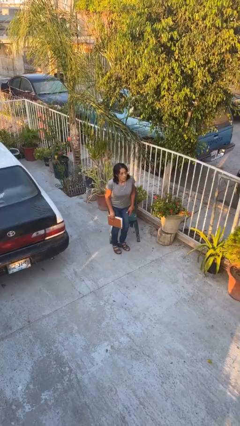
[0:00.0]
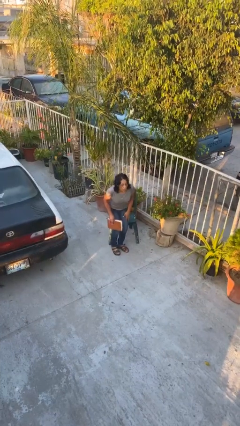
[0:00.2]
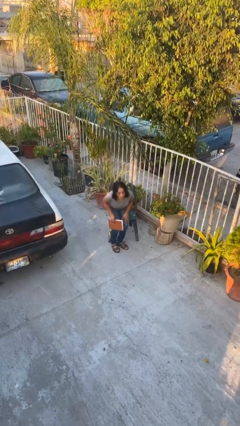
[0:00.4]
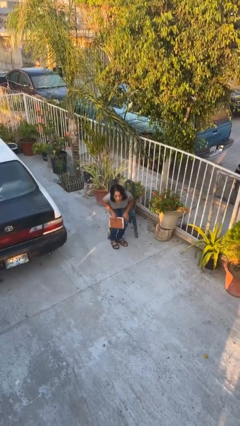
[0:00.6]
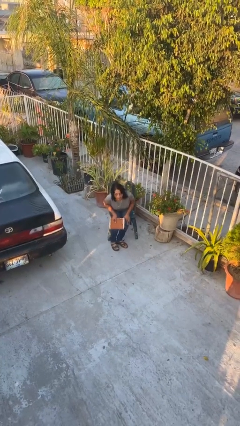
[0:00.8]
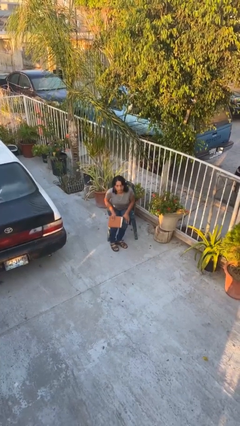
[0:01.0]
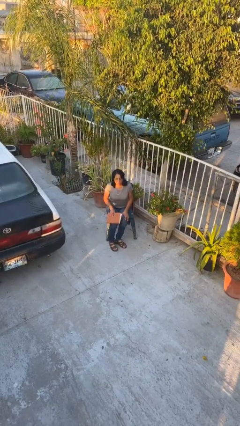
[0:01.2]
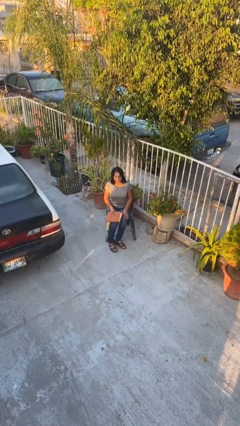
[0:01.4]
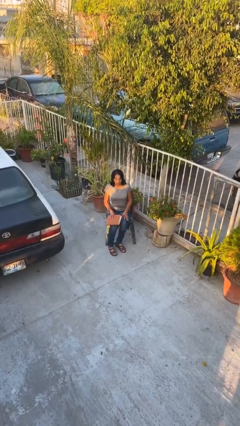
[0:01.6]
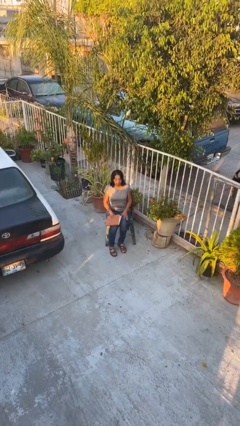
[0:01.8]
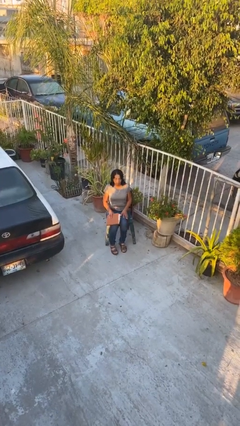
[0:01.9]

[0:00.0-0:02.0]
person sits down

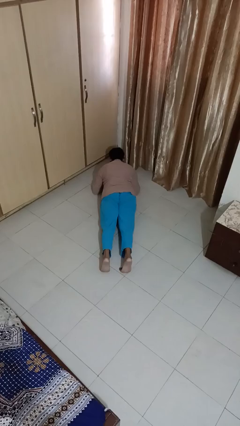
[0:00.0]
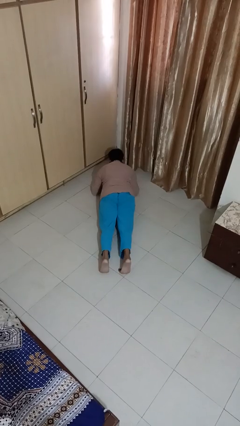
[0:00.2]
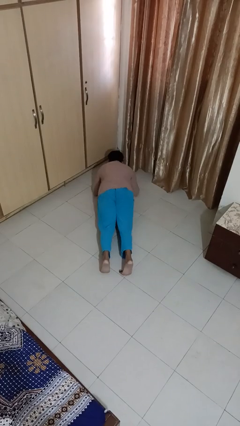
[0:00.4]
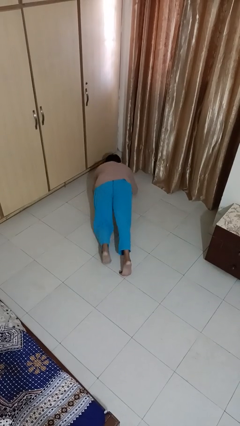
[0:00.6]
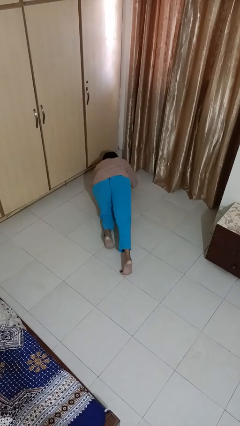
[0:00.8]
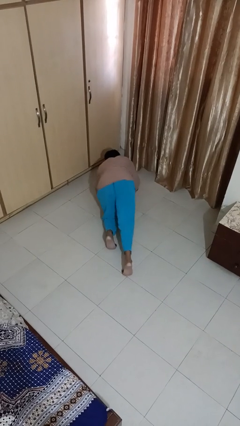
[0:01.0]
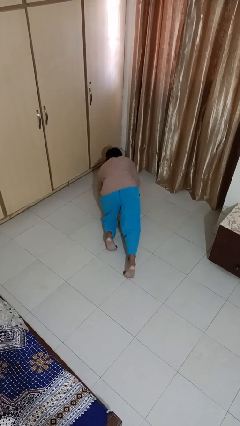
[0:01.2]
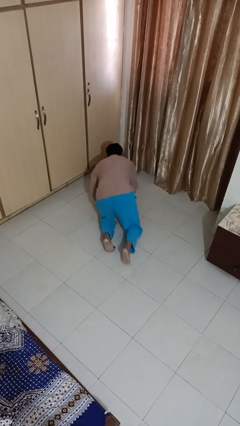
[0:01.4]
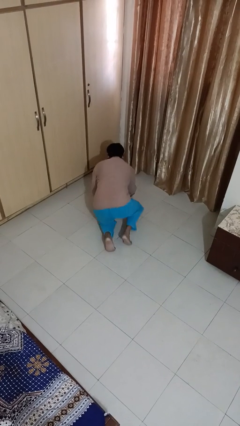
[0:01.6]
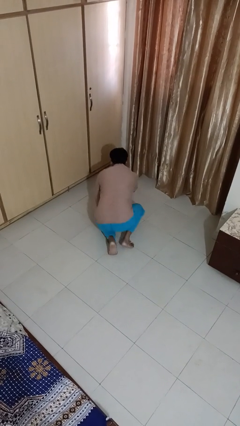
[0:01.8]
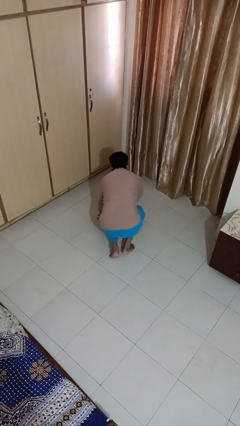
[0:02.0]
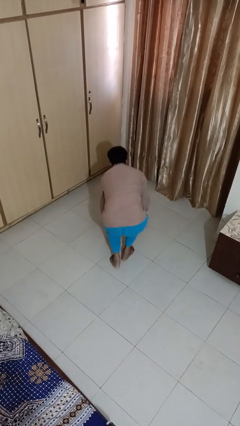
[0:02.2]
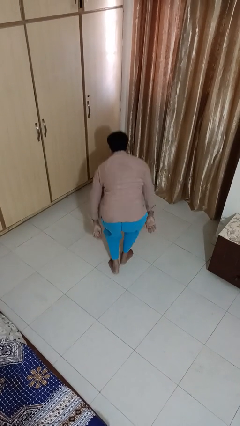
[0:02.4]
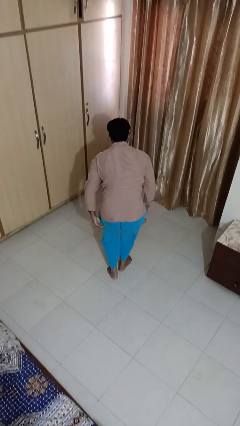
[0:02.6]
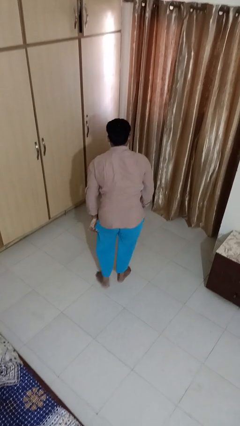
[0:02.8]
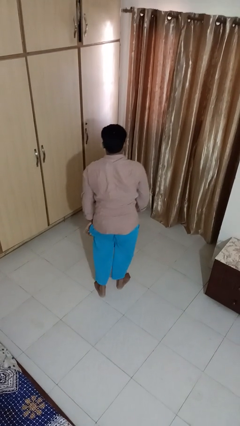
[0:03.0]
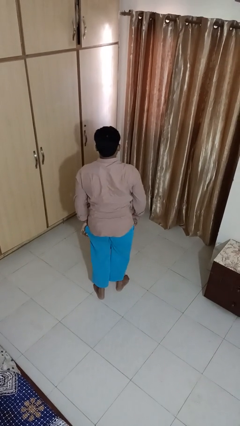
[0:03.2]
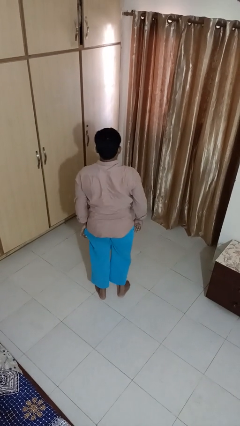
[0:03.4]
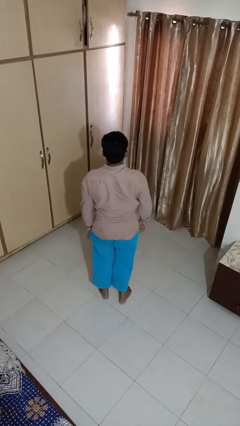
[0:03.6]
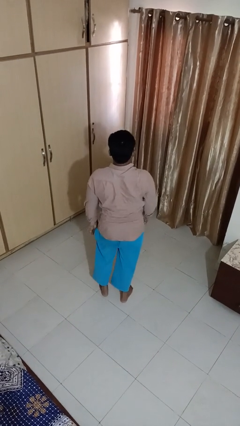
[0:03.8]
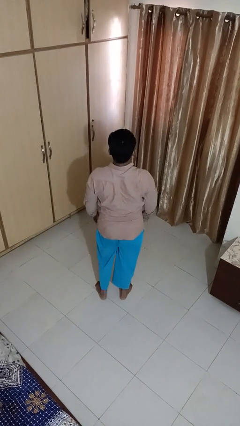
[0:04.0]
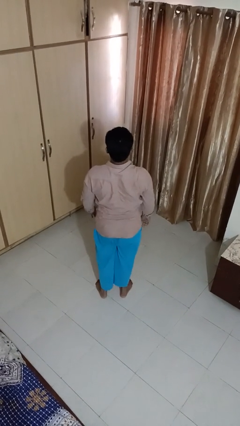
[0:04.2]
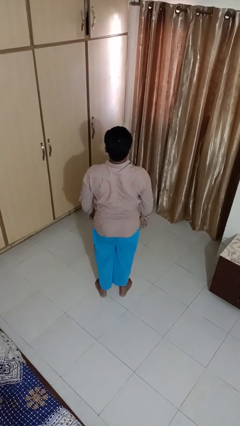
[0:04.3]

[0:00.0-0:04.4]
person stands up from floor

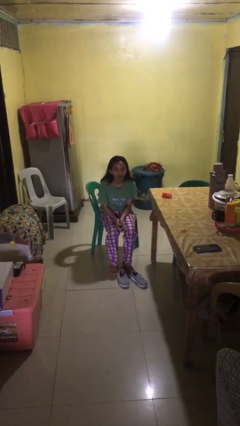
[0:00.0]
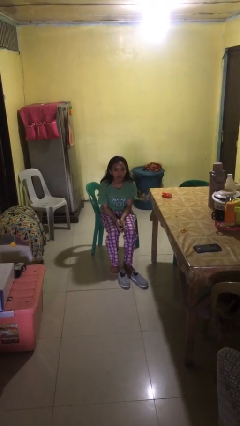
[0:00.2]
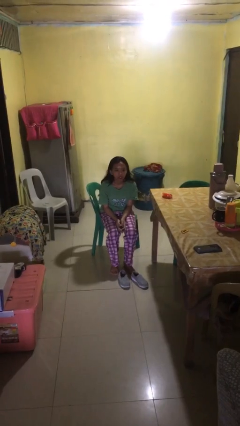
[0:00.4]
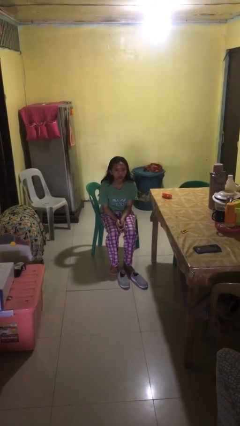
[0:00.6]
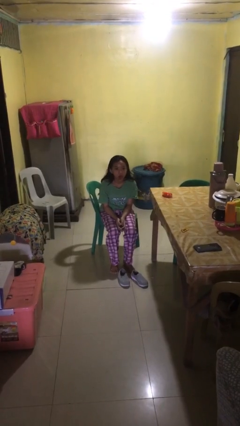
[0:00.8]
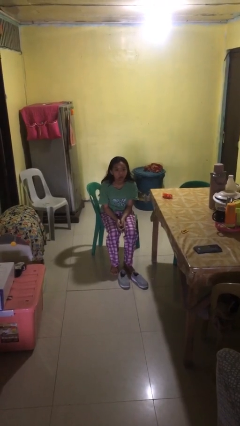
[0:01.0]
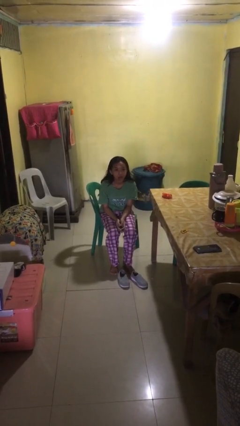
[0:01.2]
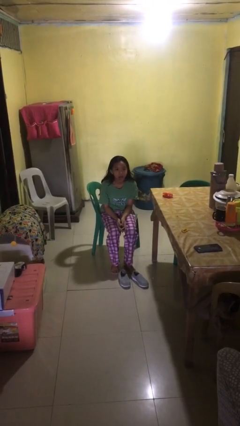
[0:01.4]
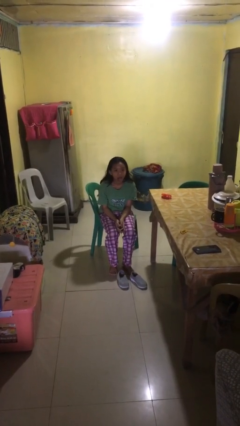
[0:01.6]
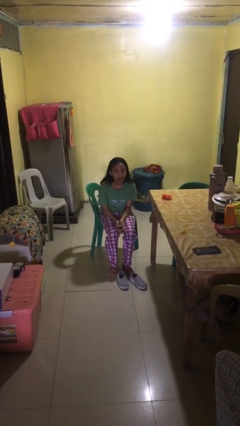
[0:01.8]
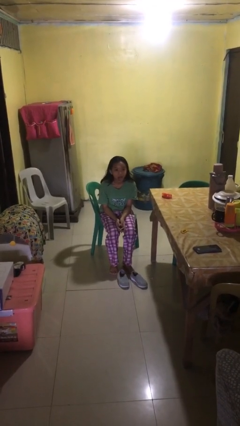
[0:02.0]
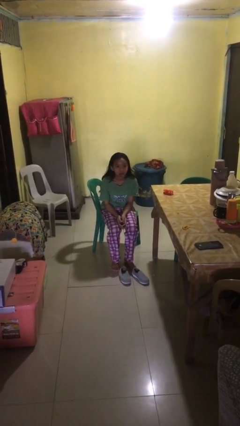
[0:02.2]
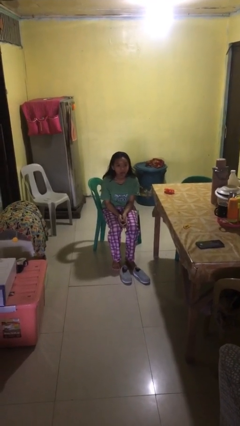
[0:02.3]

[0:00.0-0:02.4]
person sticks out tongue

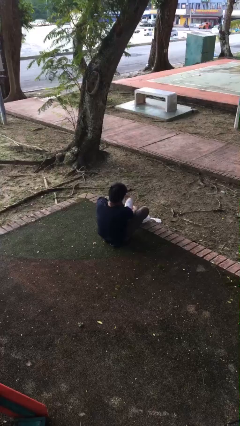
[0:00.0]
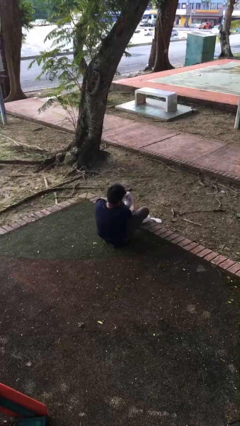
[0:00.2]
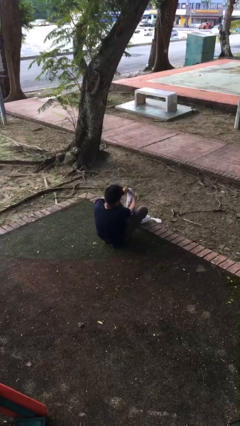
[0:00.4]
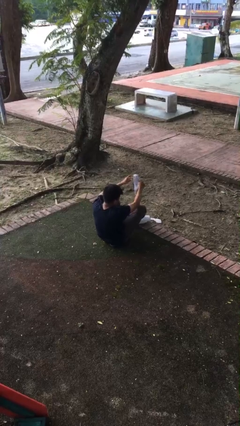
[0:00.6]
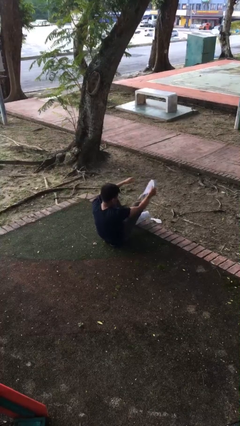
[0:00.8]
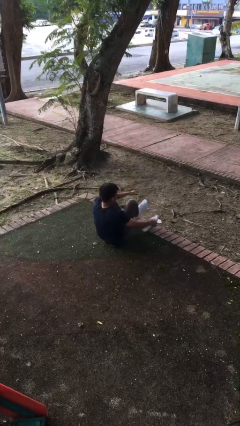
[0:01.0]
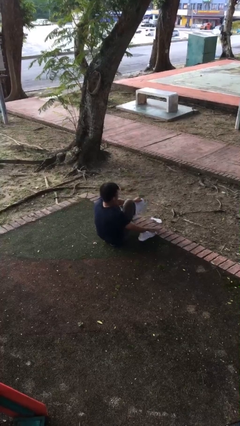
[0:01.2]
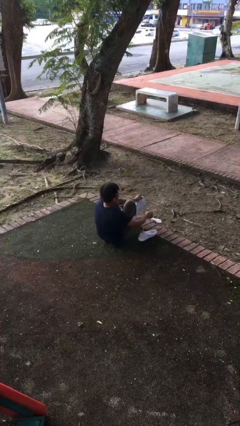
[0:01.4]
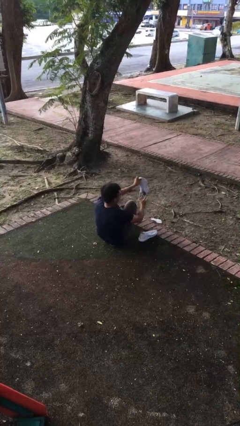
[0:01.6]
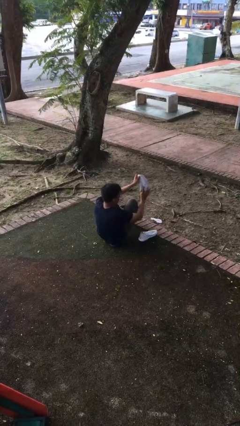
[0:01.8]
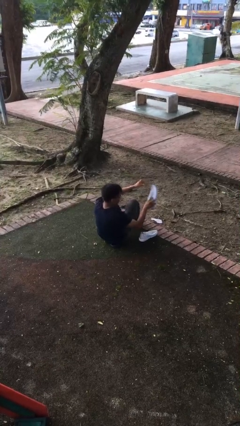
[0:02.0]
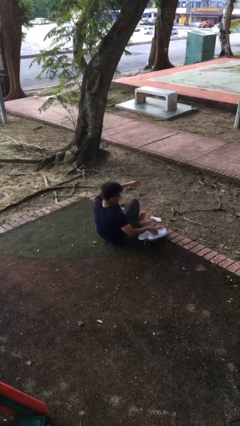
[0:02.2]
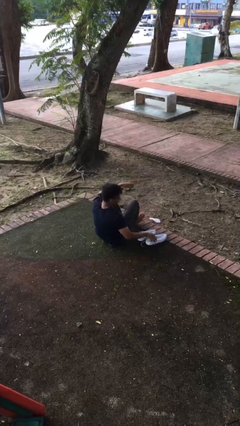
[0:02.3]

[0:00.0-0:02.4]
person takes off shoes

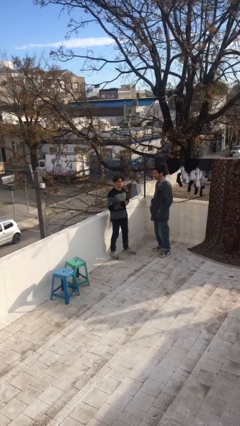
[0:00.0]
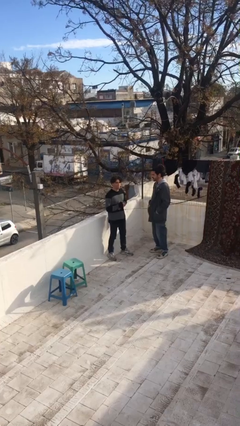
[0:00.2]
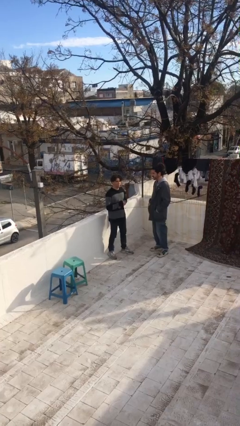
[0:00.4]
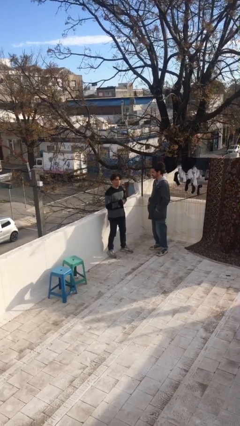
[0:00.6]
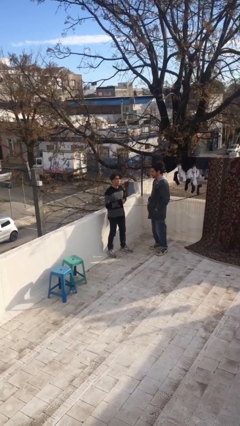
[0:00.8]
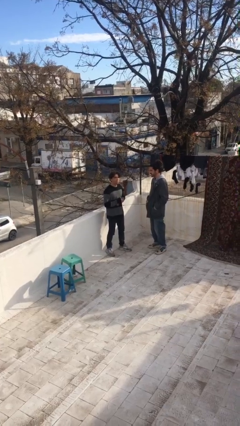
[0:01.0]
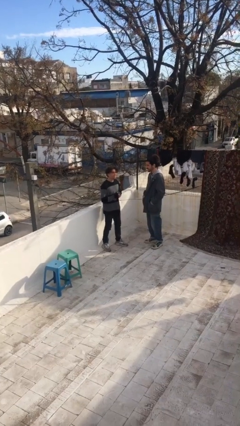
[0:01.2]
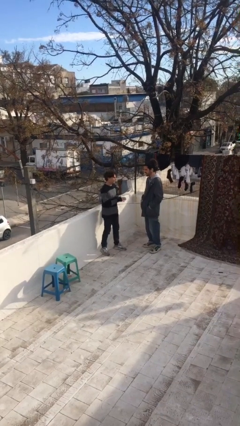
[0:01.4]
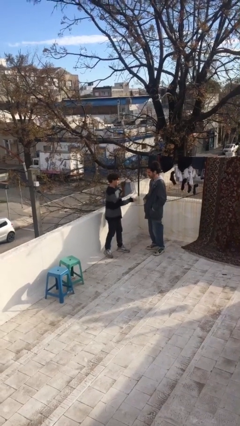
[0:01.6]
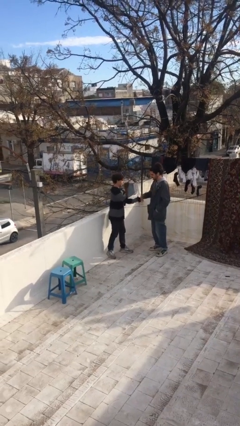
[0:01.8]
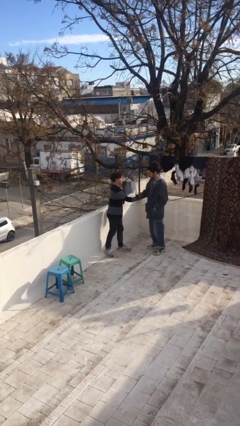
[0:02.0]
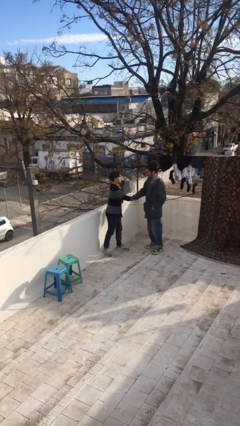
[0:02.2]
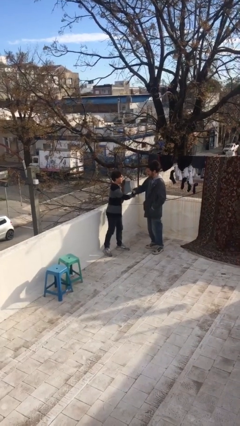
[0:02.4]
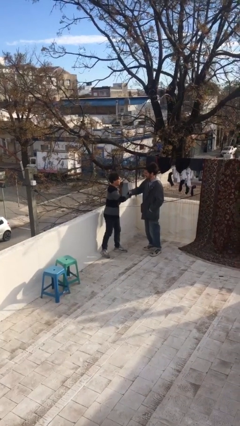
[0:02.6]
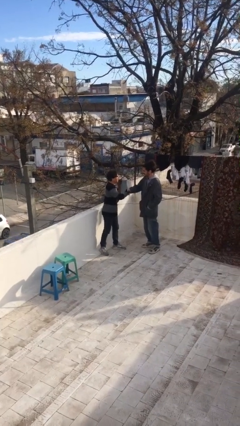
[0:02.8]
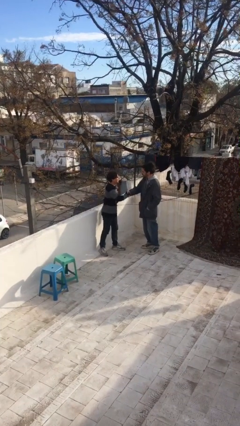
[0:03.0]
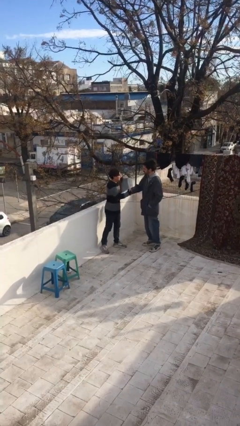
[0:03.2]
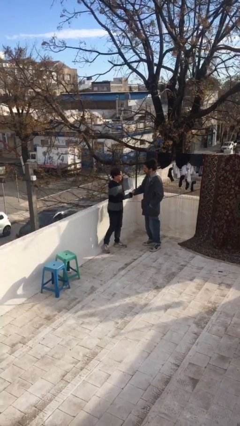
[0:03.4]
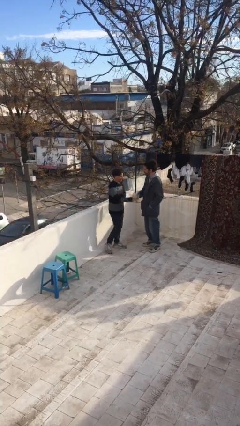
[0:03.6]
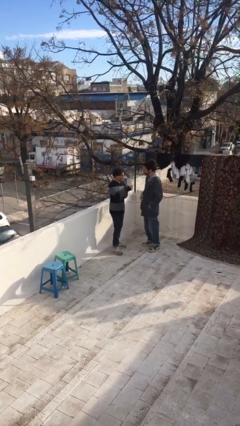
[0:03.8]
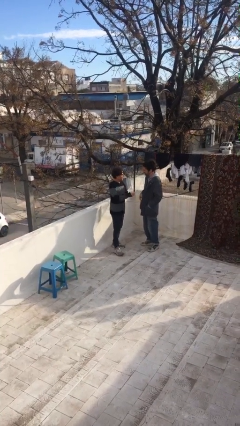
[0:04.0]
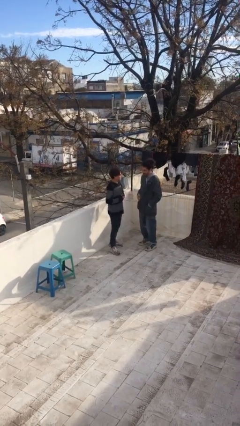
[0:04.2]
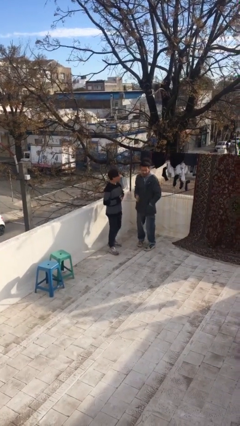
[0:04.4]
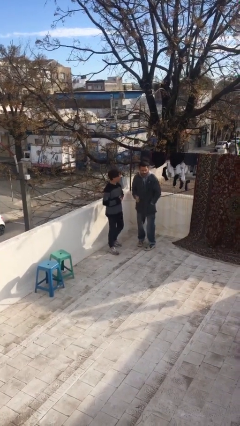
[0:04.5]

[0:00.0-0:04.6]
person shakes hand

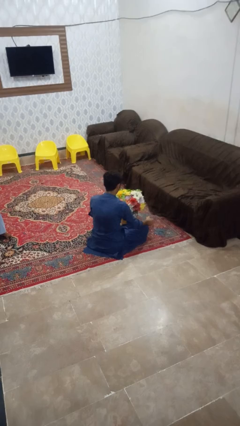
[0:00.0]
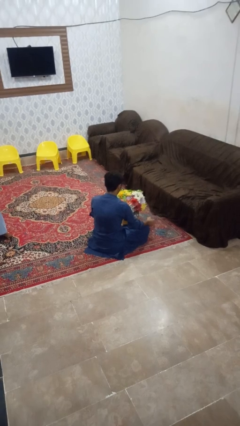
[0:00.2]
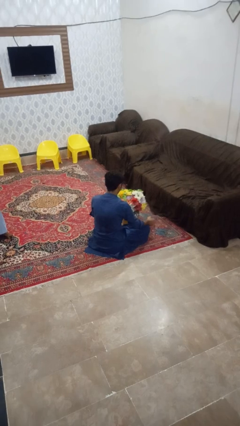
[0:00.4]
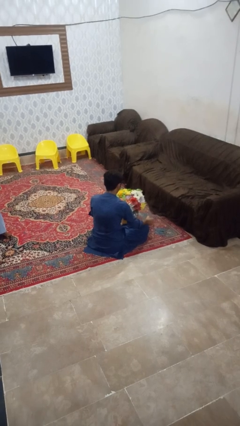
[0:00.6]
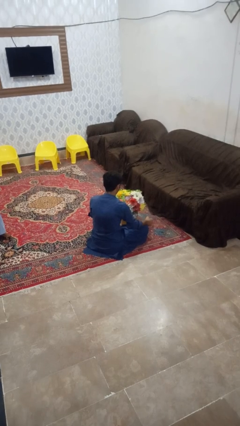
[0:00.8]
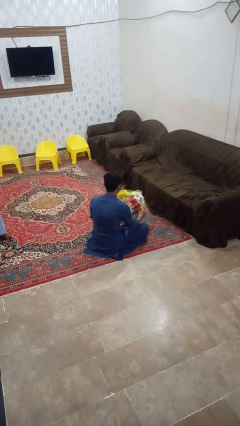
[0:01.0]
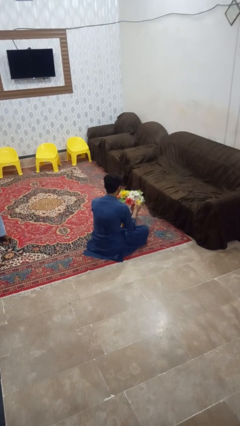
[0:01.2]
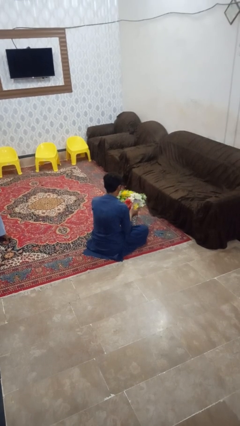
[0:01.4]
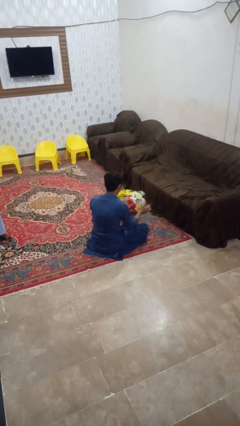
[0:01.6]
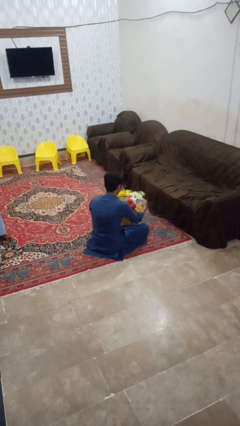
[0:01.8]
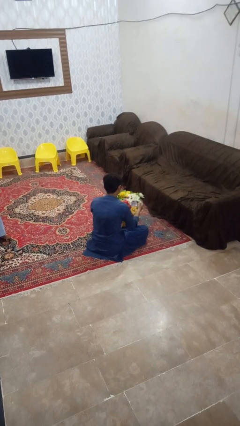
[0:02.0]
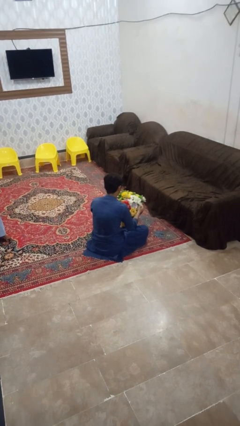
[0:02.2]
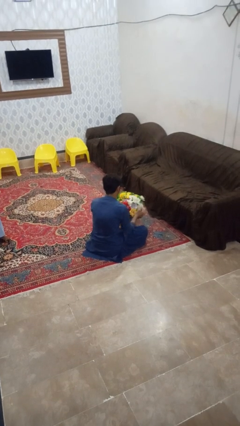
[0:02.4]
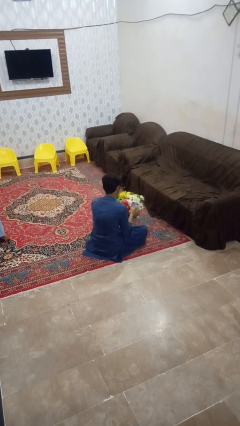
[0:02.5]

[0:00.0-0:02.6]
person arranges flowers in vase
